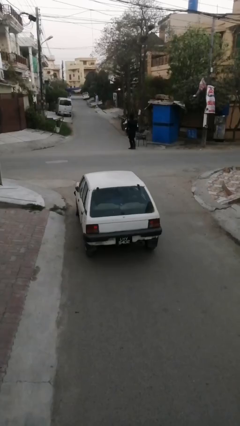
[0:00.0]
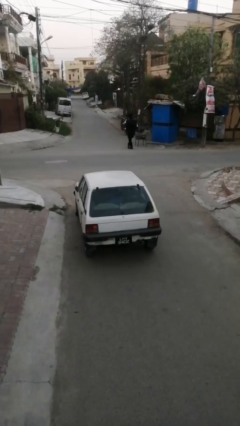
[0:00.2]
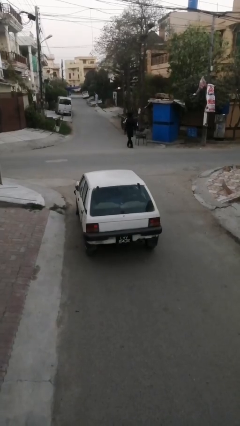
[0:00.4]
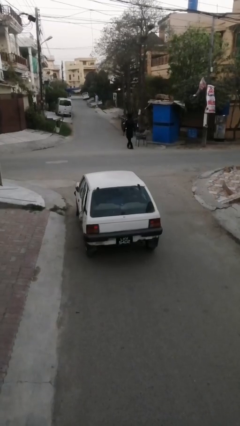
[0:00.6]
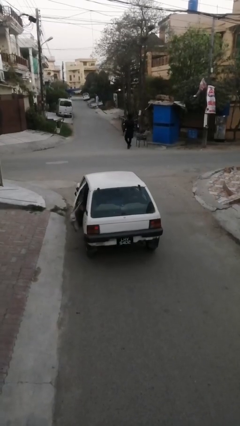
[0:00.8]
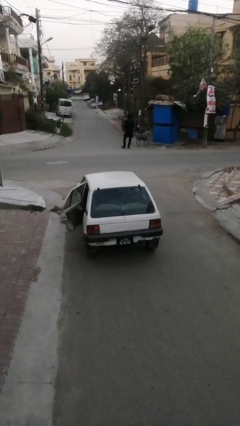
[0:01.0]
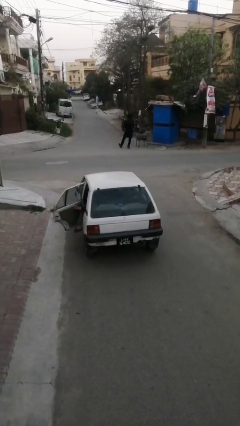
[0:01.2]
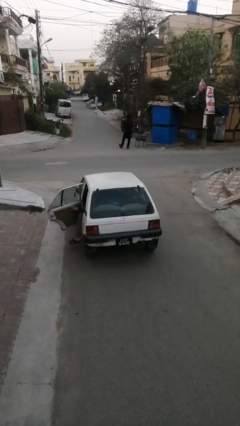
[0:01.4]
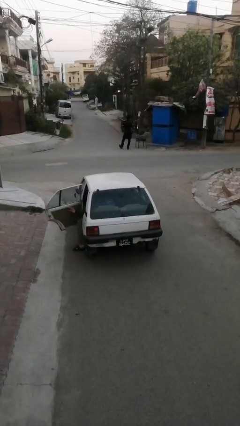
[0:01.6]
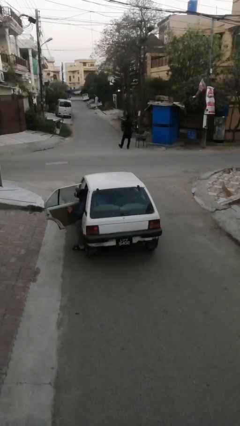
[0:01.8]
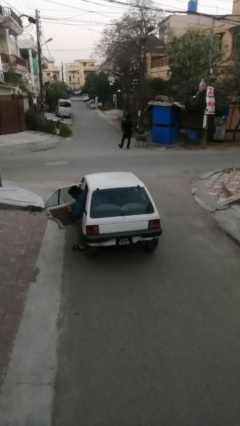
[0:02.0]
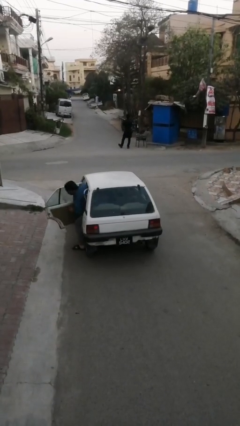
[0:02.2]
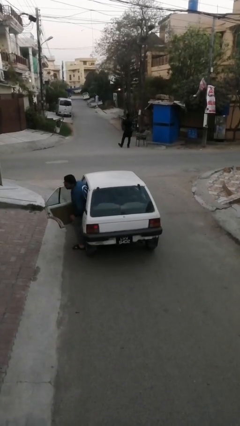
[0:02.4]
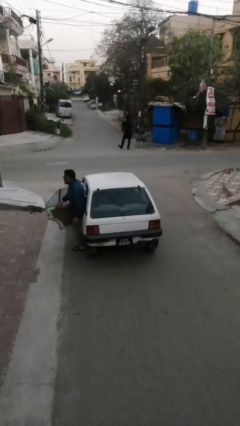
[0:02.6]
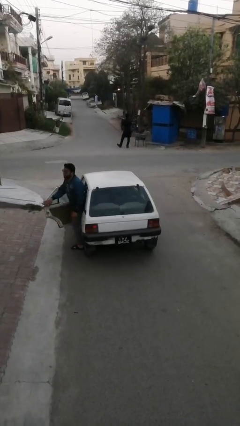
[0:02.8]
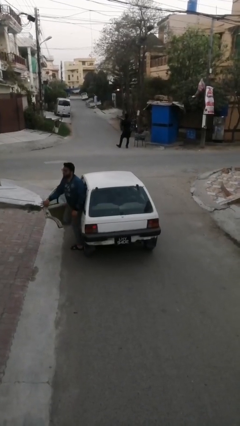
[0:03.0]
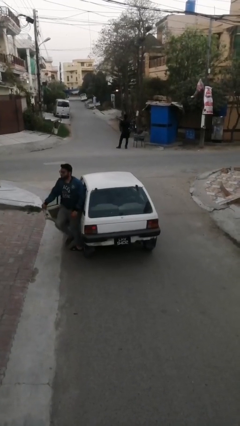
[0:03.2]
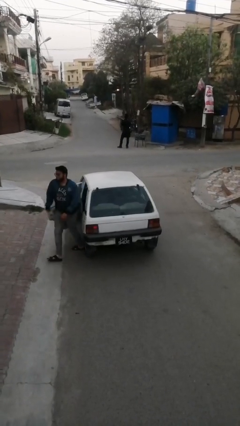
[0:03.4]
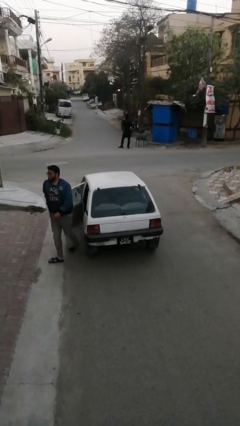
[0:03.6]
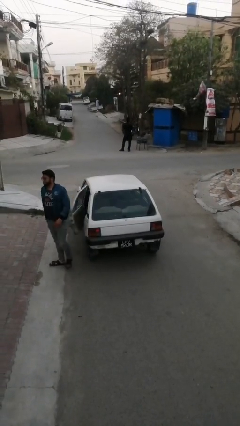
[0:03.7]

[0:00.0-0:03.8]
car drops off person

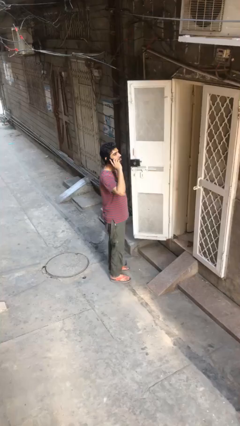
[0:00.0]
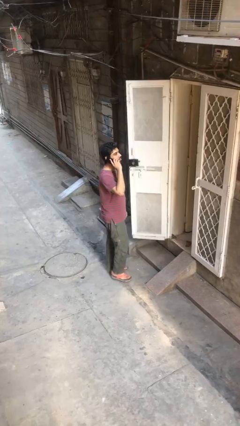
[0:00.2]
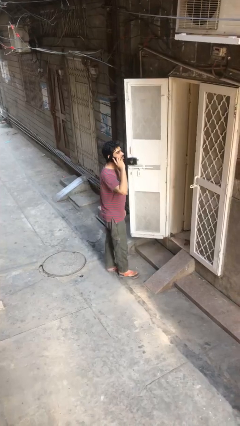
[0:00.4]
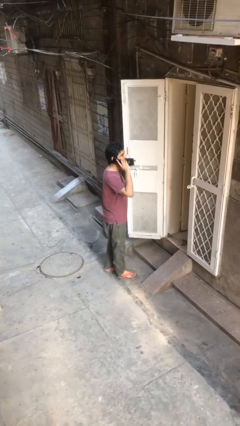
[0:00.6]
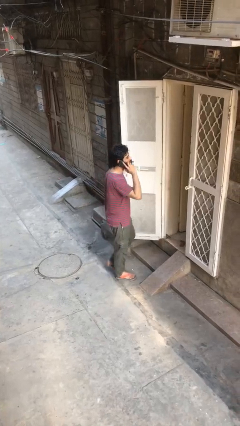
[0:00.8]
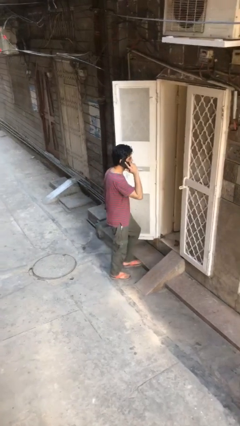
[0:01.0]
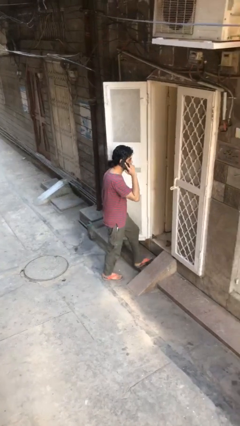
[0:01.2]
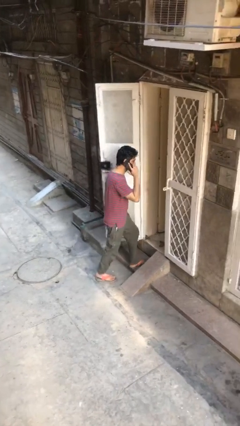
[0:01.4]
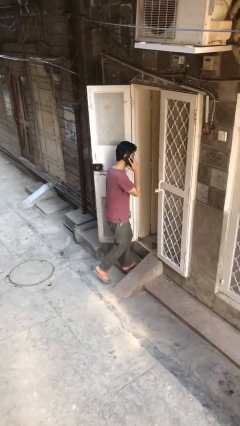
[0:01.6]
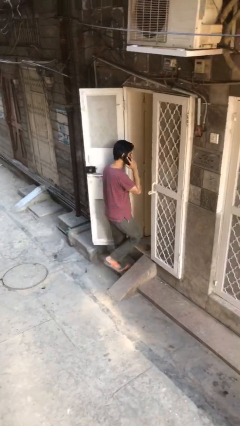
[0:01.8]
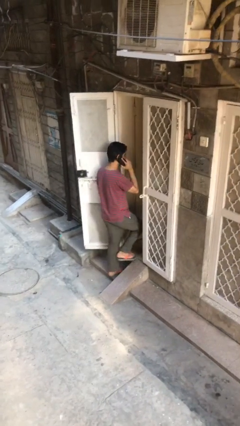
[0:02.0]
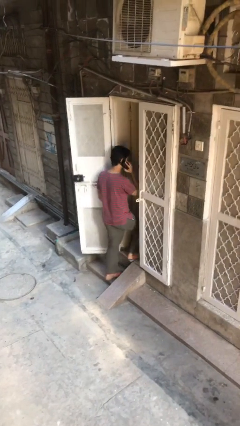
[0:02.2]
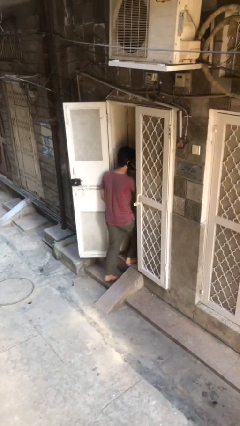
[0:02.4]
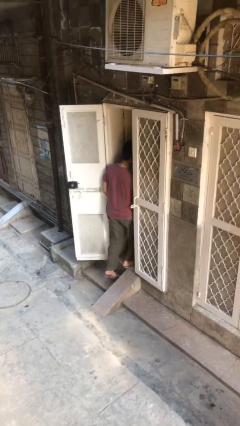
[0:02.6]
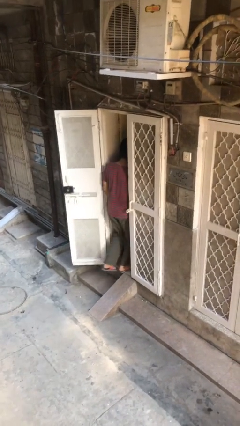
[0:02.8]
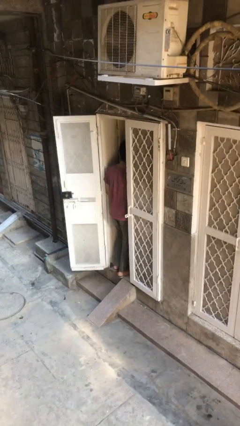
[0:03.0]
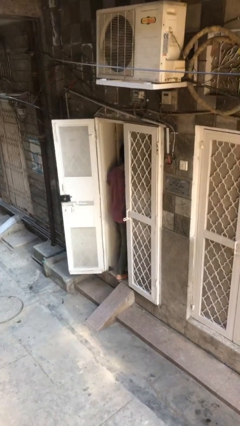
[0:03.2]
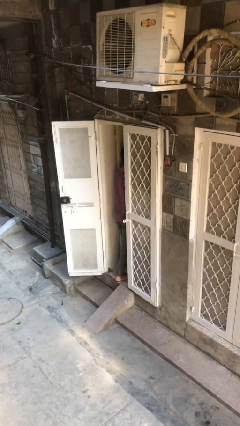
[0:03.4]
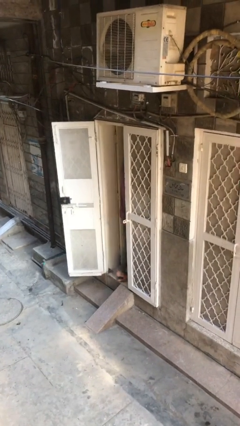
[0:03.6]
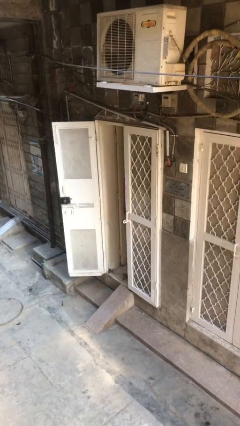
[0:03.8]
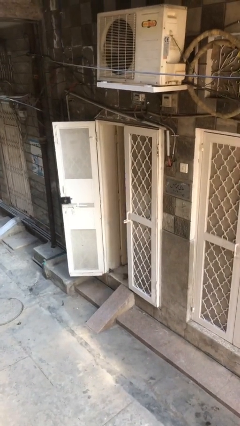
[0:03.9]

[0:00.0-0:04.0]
person exits scene through structure

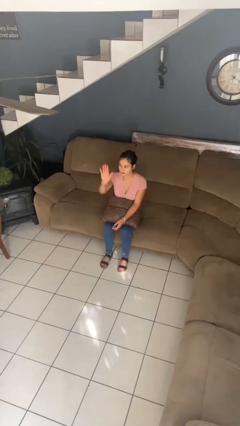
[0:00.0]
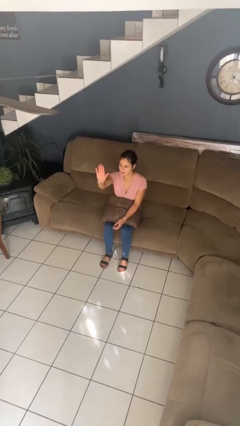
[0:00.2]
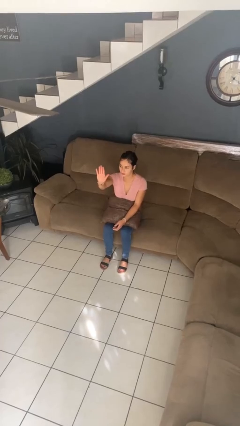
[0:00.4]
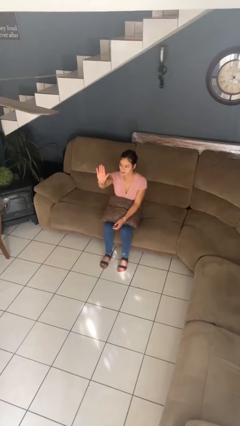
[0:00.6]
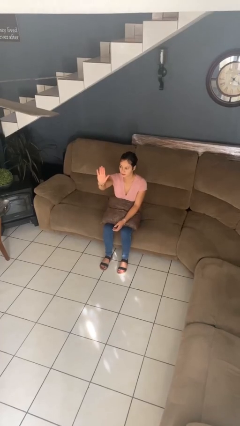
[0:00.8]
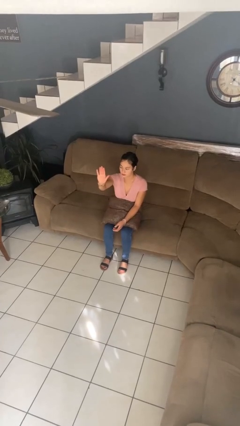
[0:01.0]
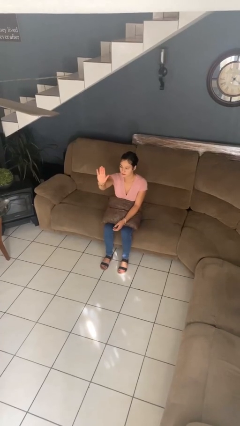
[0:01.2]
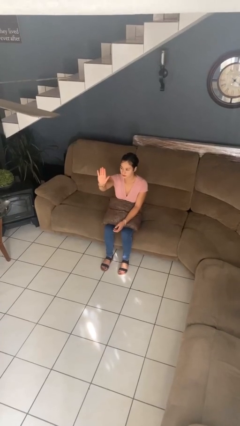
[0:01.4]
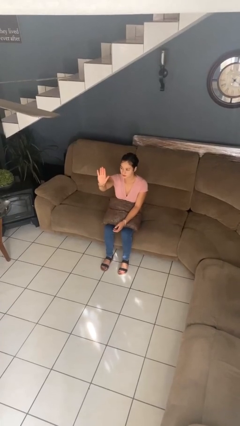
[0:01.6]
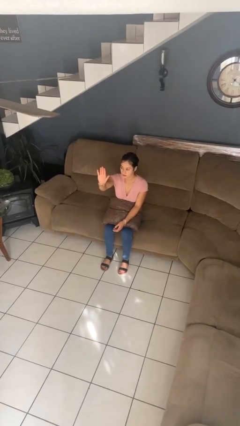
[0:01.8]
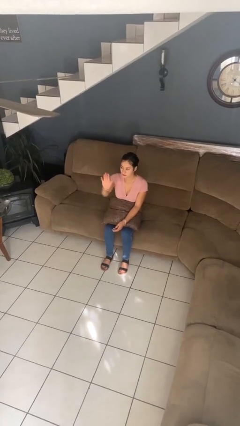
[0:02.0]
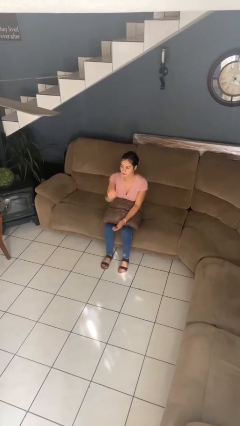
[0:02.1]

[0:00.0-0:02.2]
person gestures stop

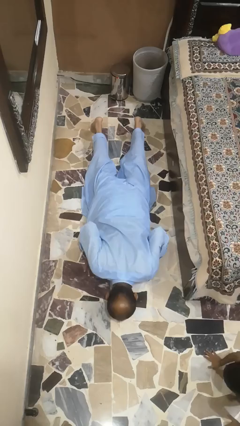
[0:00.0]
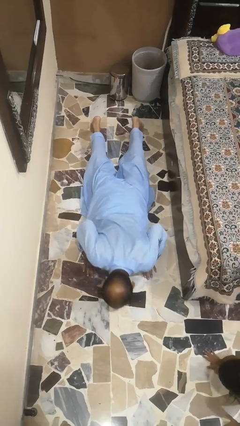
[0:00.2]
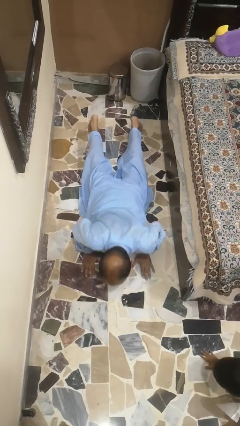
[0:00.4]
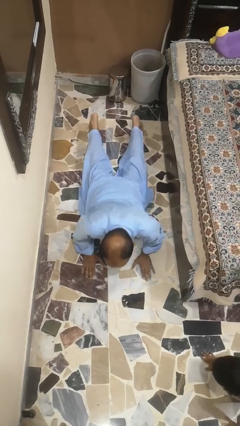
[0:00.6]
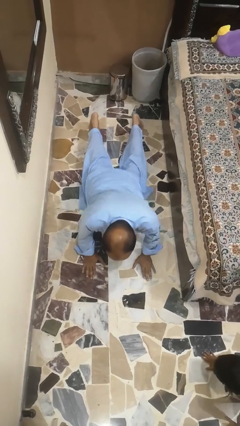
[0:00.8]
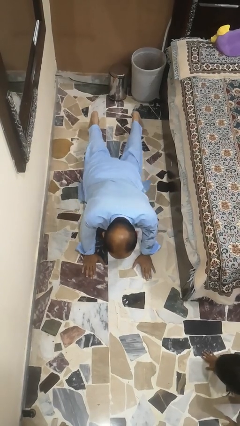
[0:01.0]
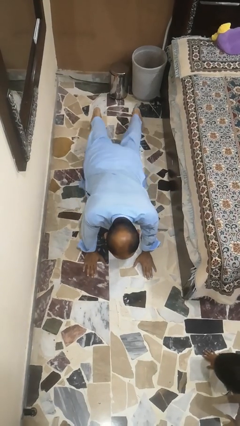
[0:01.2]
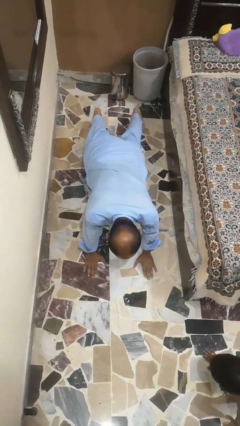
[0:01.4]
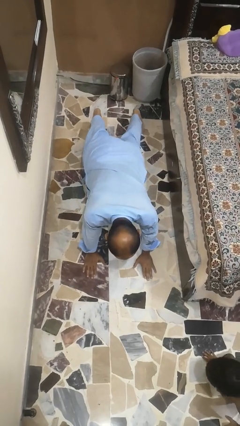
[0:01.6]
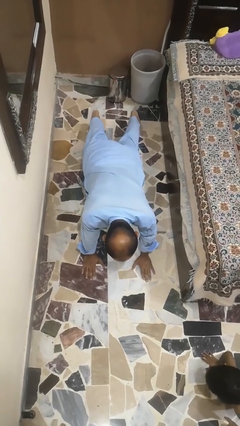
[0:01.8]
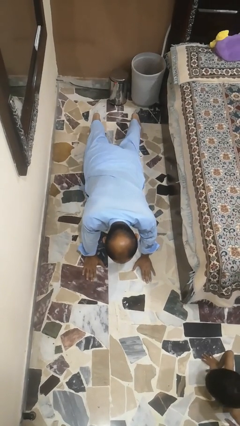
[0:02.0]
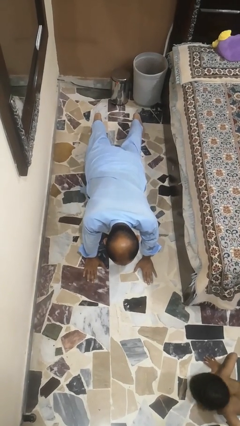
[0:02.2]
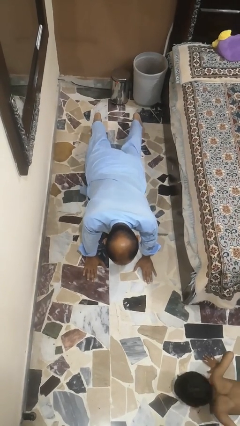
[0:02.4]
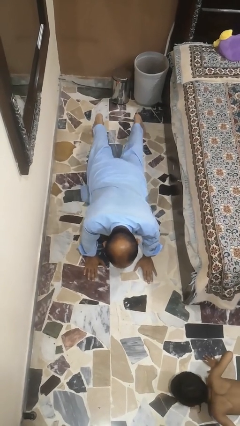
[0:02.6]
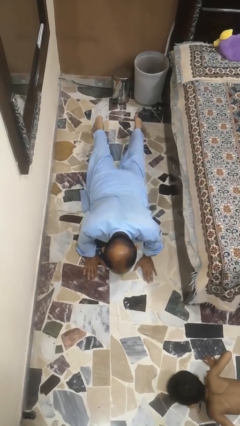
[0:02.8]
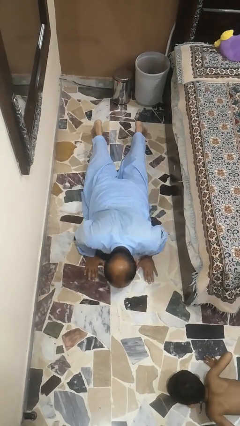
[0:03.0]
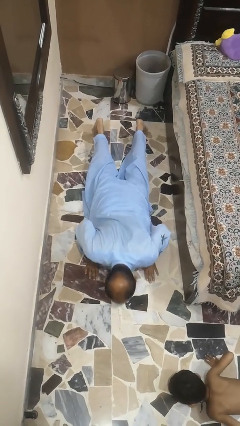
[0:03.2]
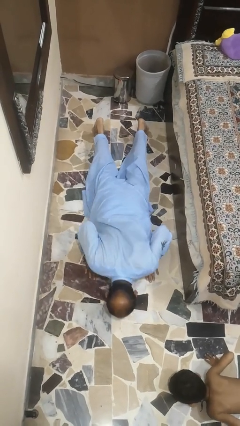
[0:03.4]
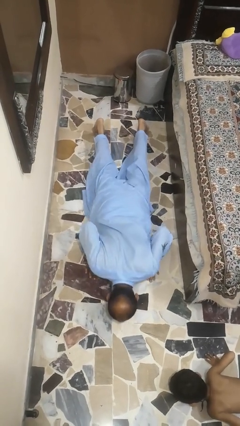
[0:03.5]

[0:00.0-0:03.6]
person exercises with pushup

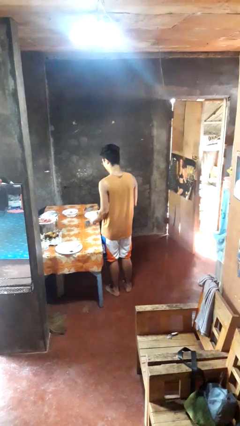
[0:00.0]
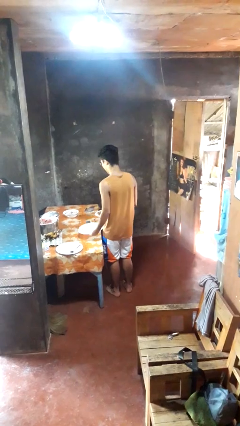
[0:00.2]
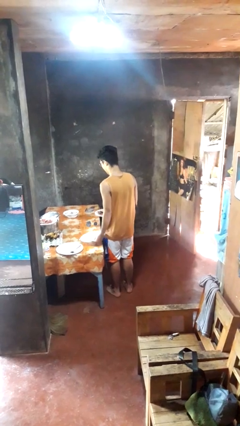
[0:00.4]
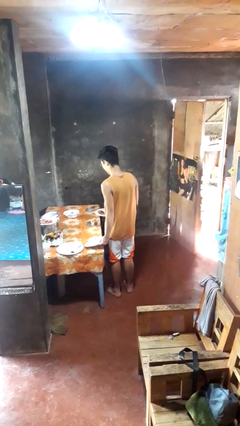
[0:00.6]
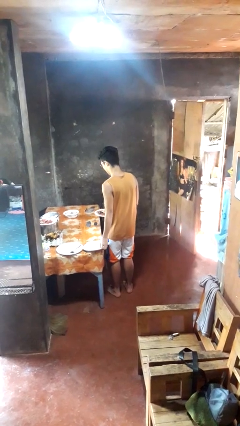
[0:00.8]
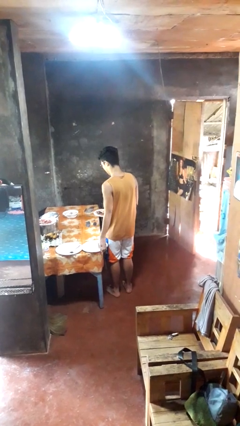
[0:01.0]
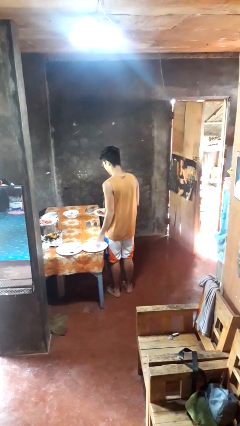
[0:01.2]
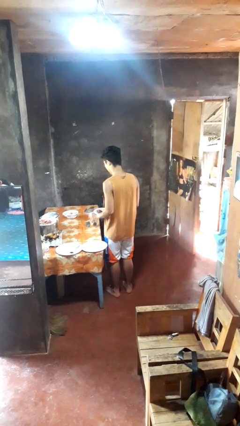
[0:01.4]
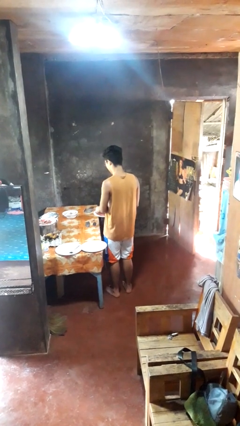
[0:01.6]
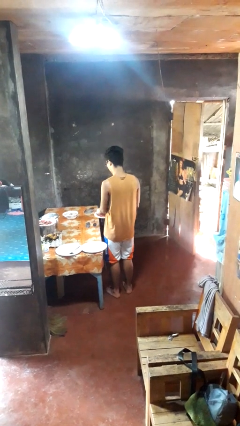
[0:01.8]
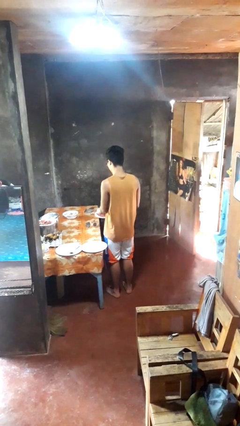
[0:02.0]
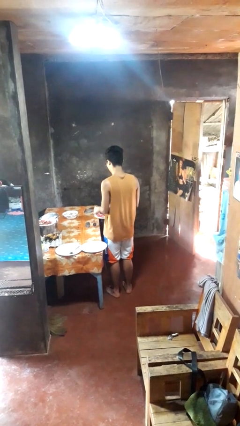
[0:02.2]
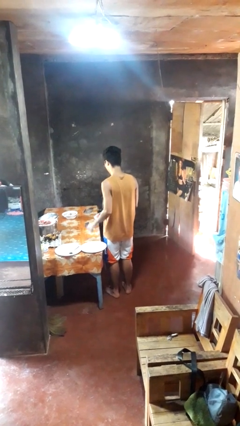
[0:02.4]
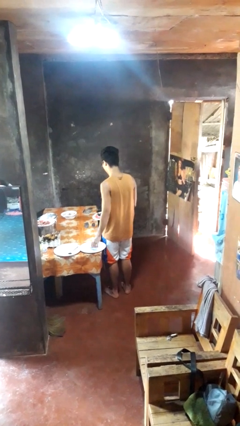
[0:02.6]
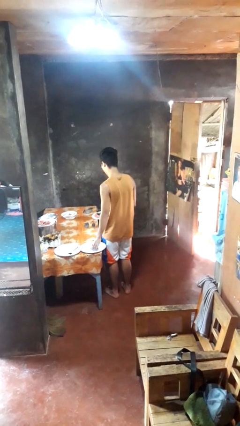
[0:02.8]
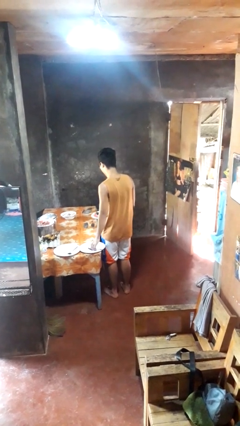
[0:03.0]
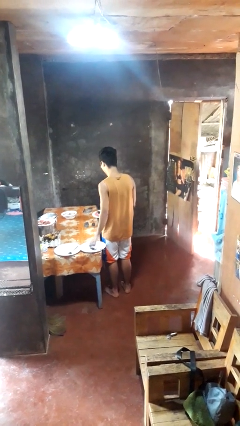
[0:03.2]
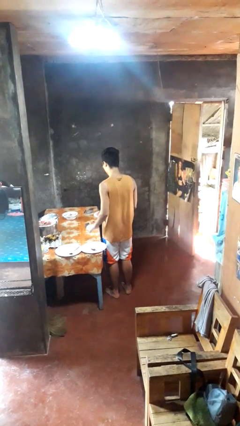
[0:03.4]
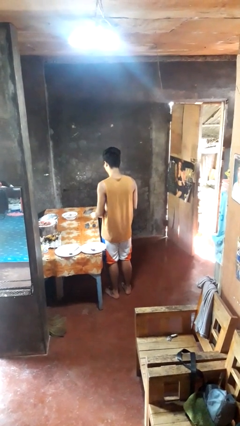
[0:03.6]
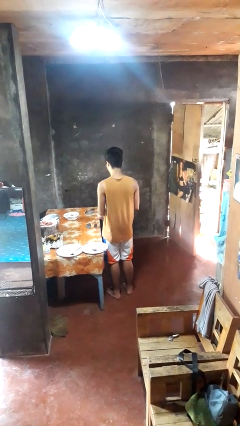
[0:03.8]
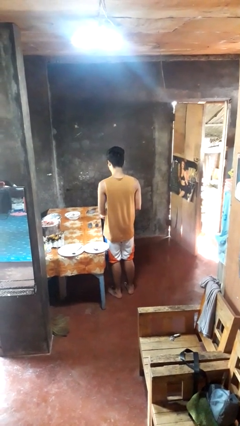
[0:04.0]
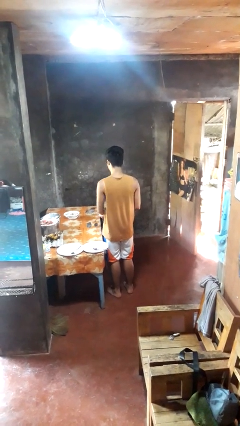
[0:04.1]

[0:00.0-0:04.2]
person sets table
